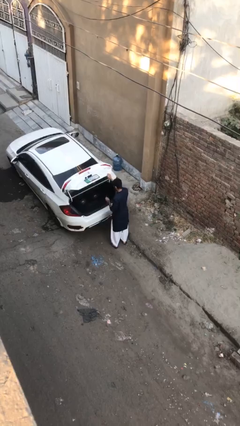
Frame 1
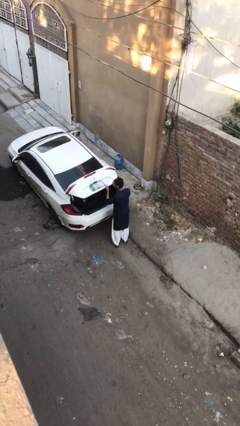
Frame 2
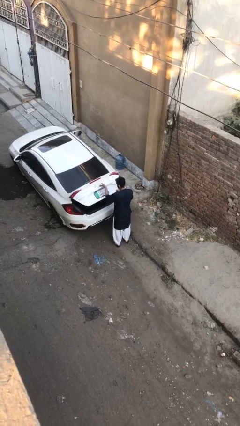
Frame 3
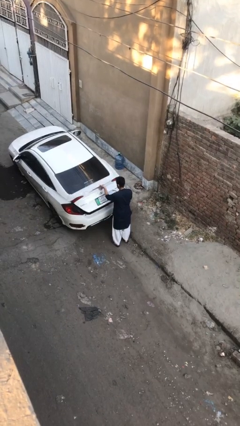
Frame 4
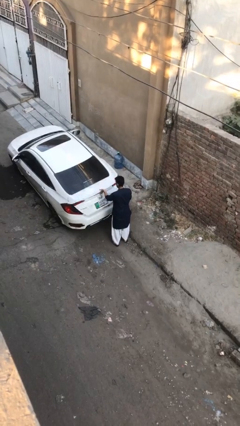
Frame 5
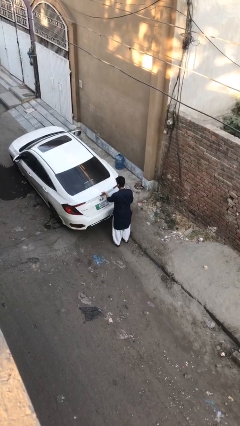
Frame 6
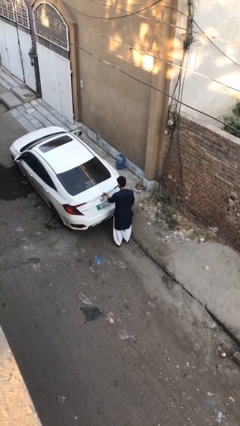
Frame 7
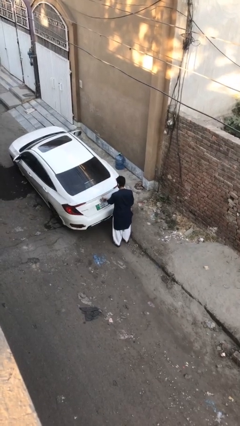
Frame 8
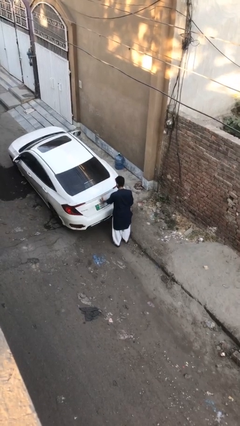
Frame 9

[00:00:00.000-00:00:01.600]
person closes car trunk

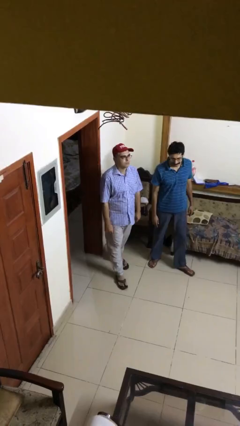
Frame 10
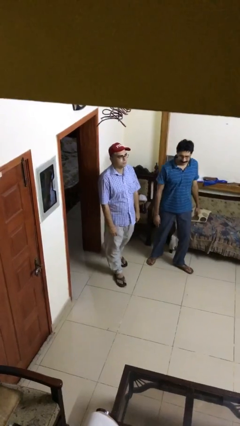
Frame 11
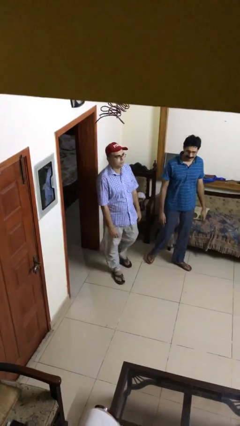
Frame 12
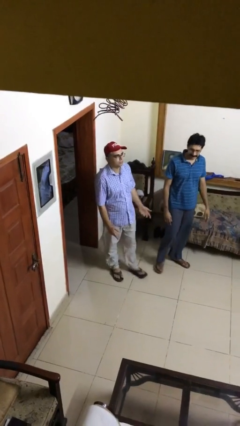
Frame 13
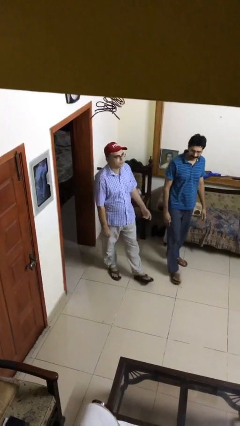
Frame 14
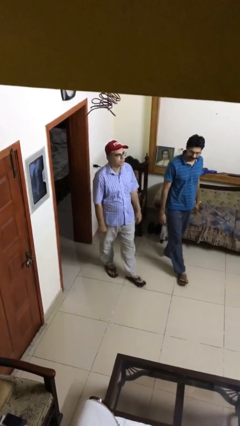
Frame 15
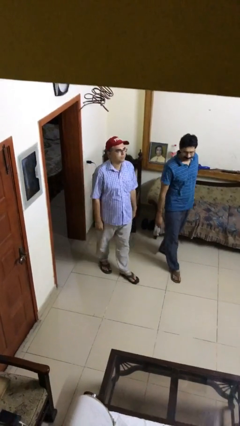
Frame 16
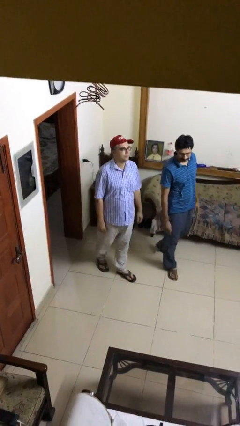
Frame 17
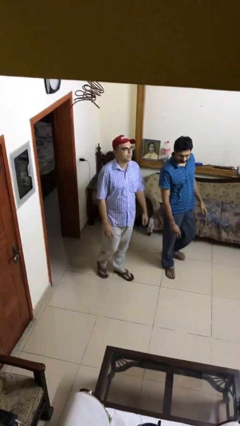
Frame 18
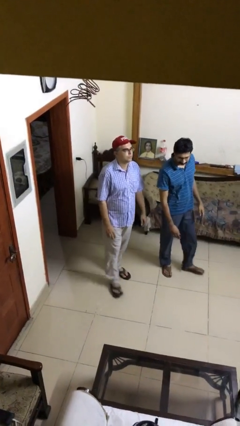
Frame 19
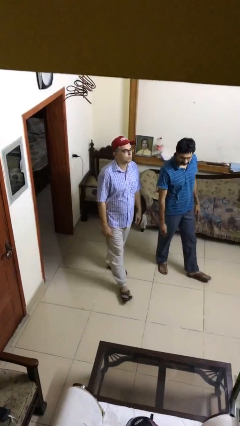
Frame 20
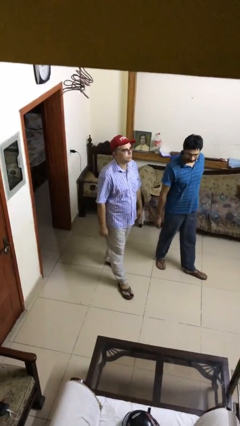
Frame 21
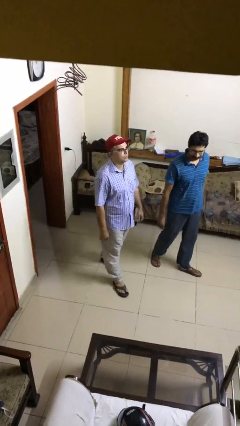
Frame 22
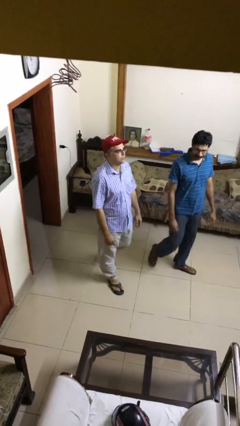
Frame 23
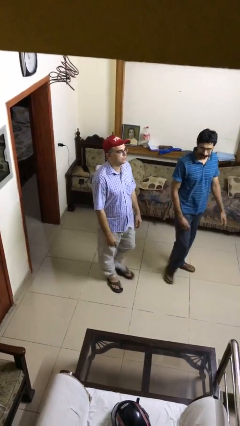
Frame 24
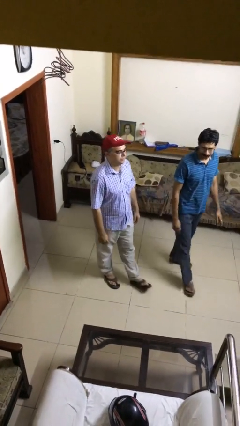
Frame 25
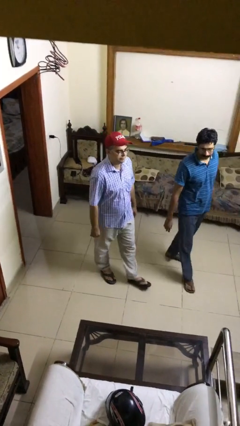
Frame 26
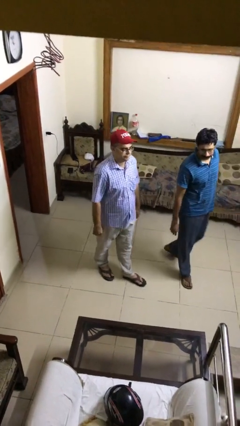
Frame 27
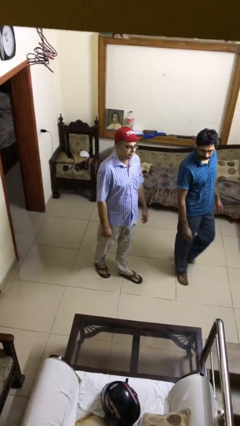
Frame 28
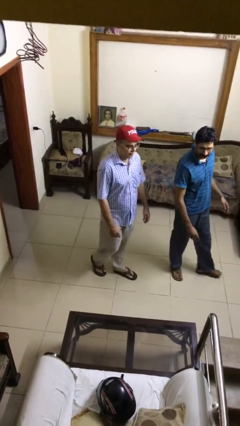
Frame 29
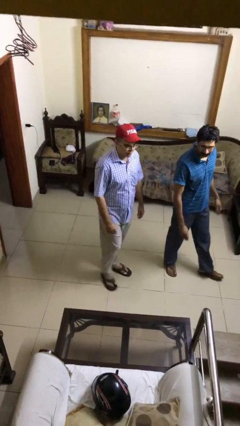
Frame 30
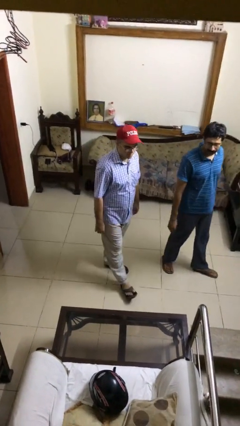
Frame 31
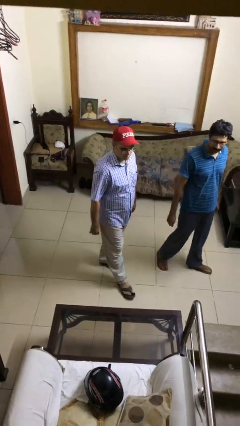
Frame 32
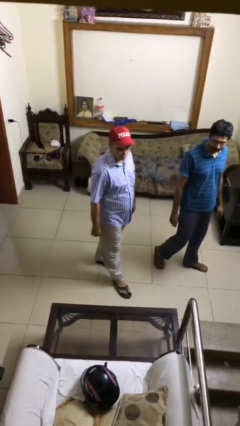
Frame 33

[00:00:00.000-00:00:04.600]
person talks to person

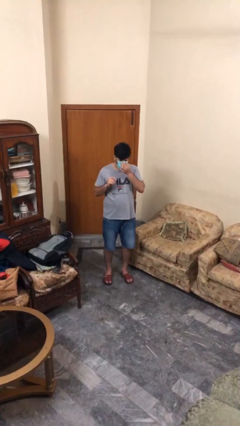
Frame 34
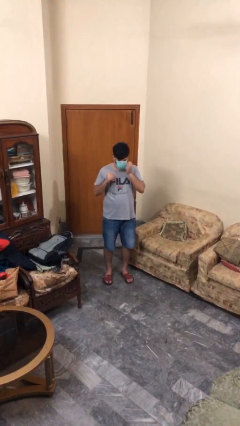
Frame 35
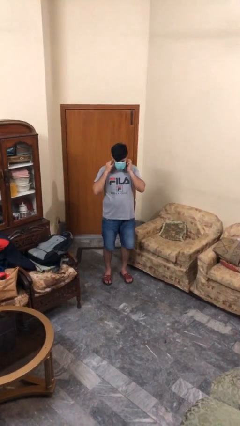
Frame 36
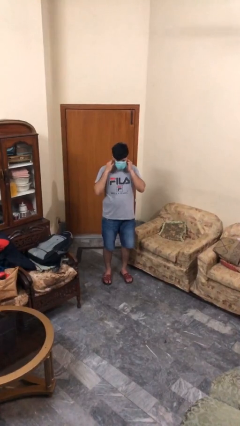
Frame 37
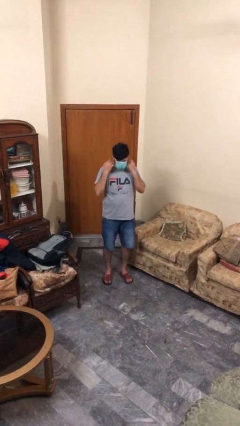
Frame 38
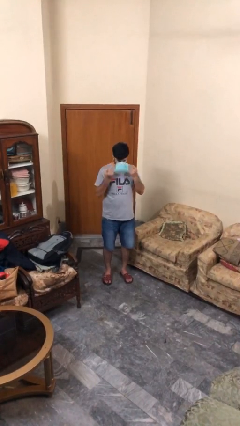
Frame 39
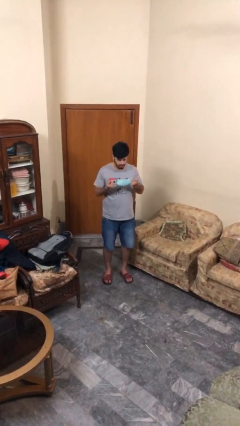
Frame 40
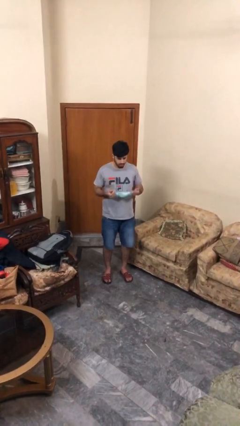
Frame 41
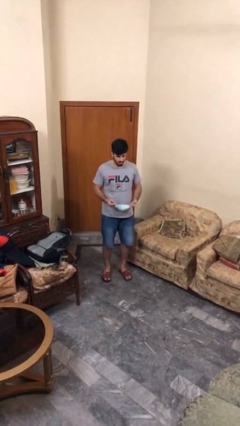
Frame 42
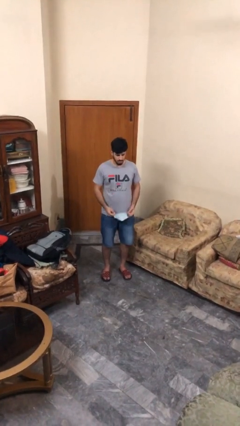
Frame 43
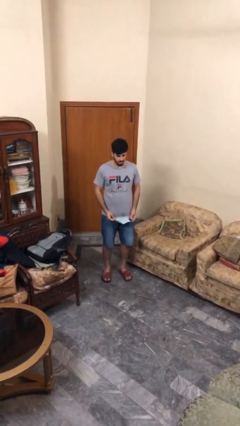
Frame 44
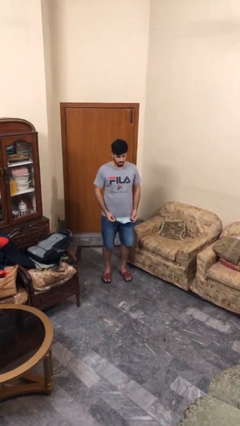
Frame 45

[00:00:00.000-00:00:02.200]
person takes off facemask

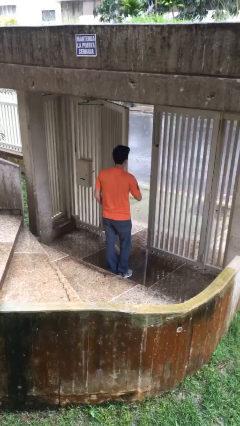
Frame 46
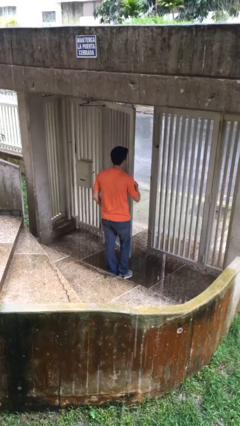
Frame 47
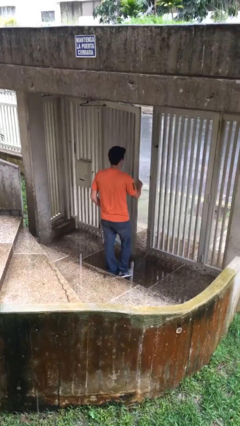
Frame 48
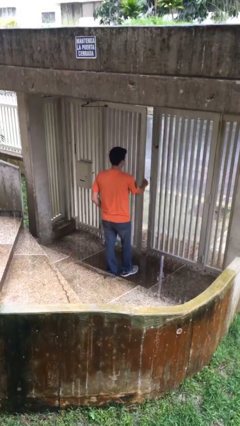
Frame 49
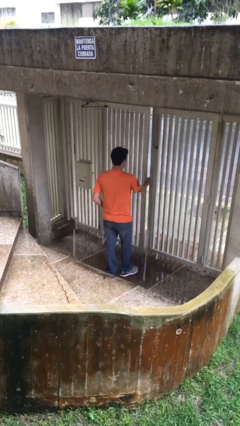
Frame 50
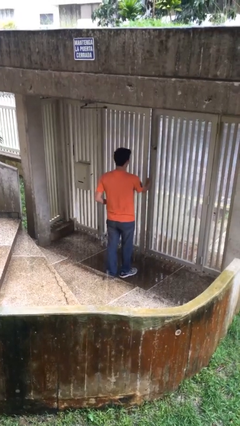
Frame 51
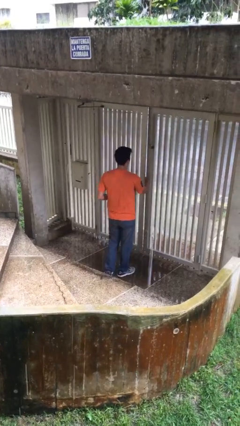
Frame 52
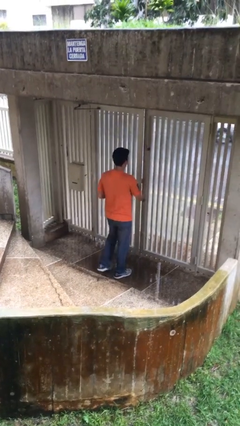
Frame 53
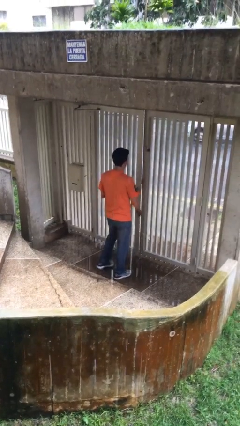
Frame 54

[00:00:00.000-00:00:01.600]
person closes facility door

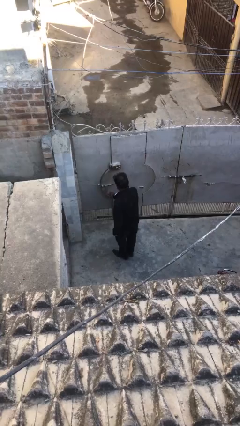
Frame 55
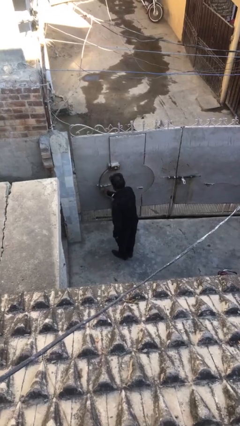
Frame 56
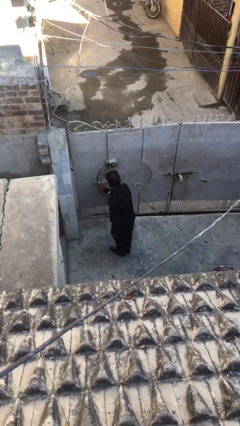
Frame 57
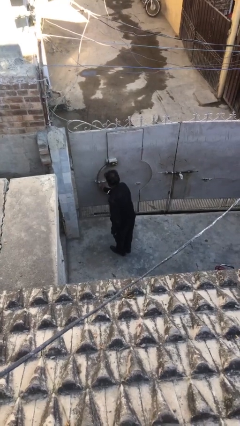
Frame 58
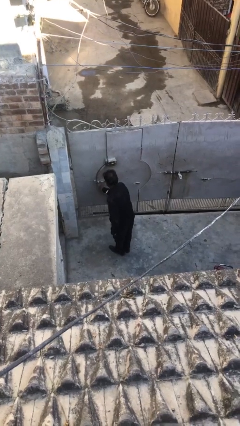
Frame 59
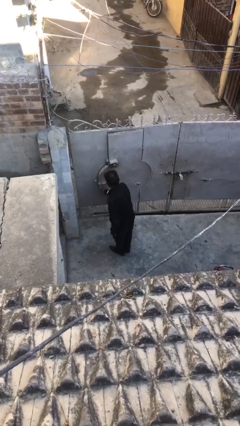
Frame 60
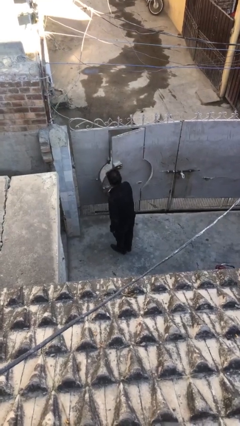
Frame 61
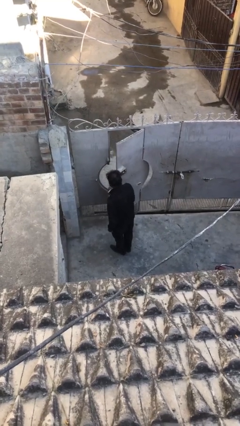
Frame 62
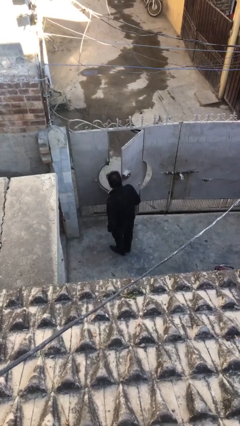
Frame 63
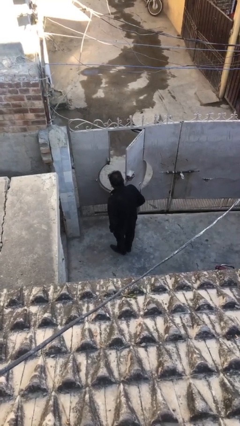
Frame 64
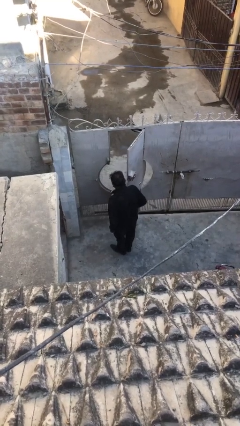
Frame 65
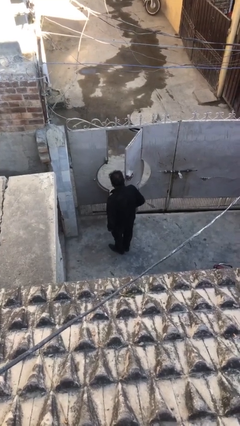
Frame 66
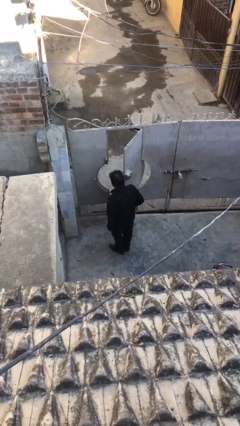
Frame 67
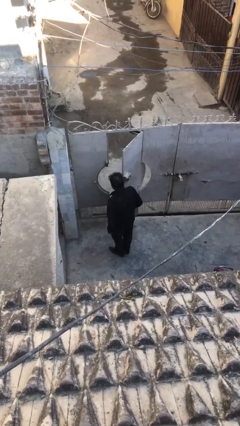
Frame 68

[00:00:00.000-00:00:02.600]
person opens facility door

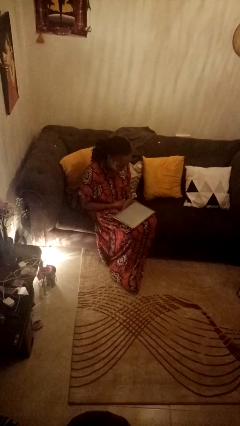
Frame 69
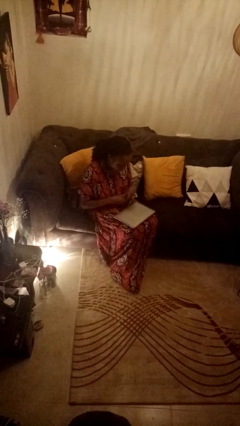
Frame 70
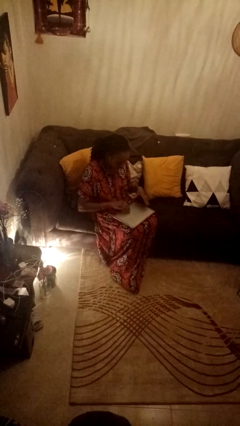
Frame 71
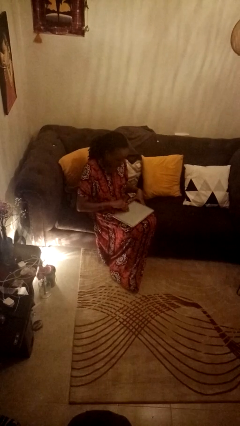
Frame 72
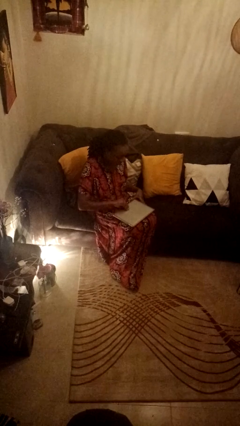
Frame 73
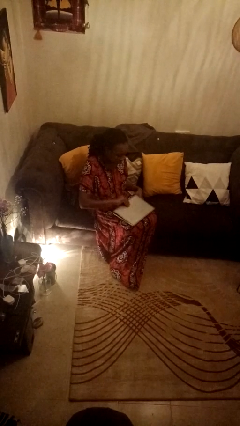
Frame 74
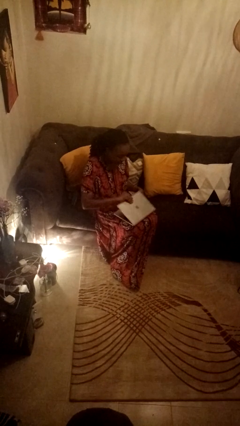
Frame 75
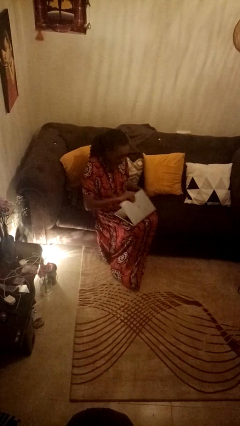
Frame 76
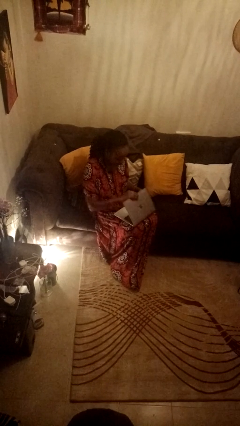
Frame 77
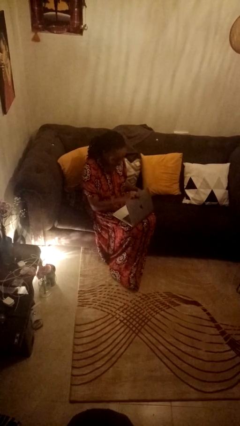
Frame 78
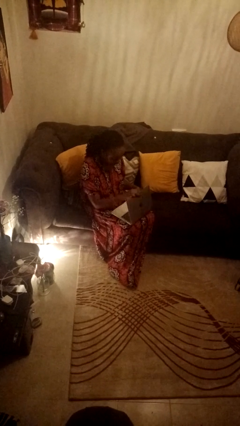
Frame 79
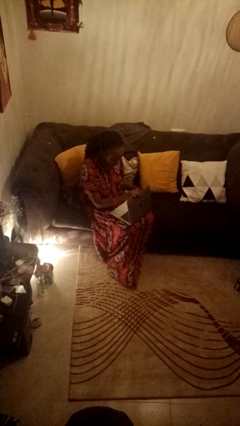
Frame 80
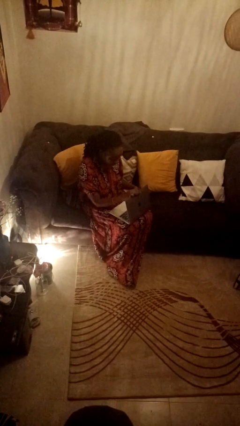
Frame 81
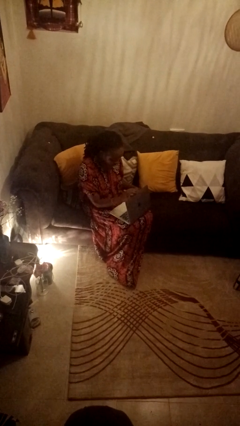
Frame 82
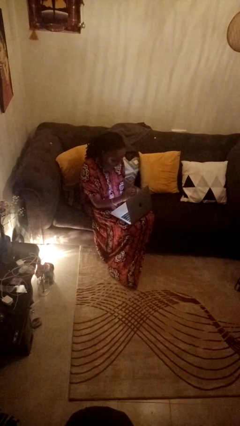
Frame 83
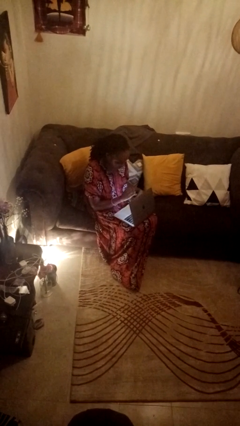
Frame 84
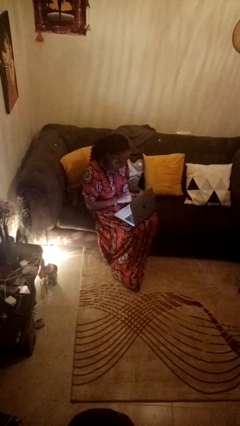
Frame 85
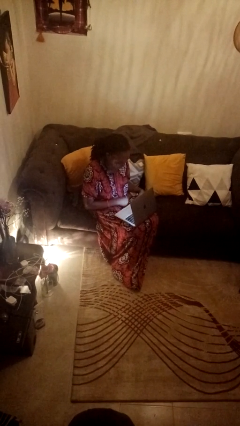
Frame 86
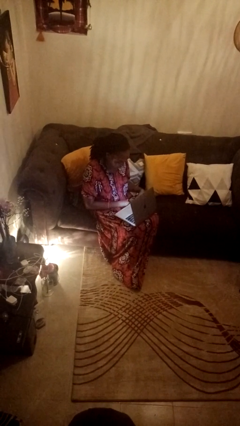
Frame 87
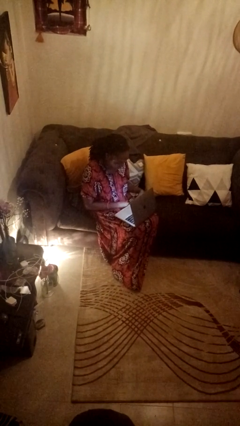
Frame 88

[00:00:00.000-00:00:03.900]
person opens laptop

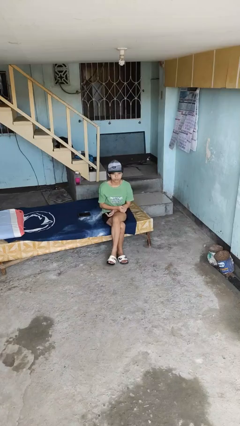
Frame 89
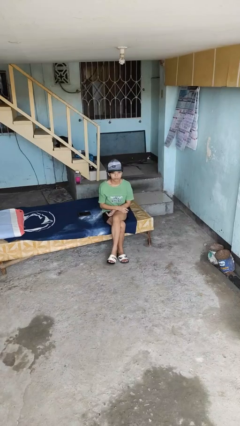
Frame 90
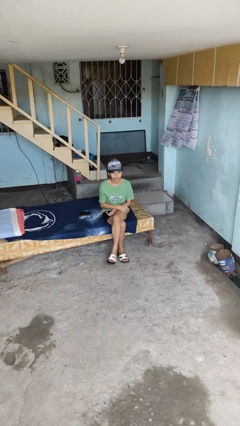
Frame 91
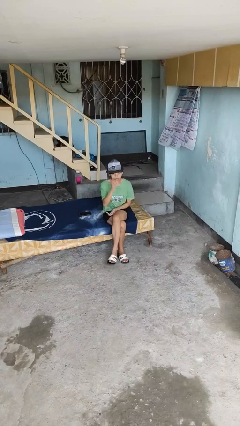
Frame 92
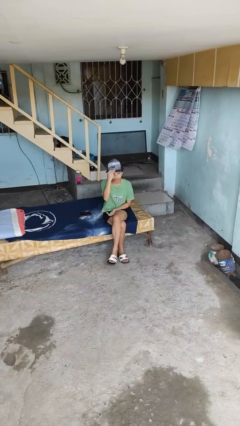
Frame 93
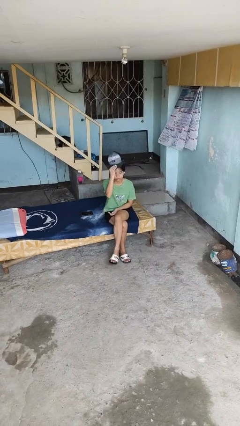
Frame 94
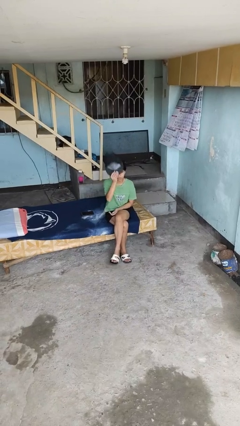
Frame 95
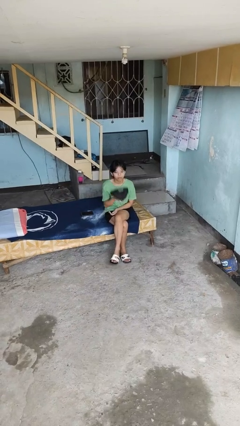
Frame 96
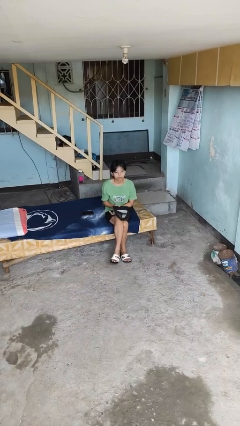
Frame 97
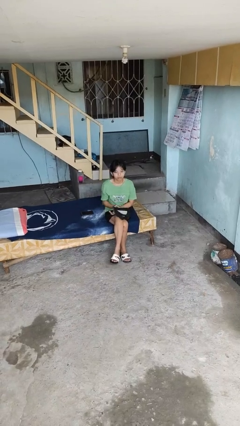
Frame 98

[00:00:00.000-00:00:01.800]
person takes off hat
